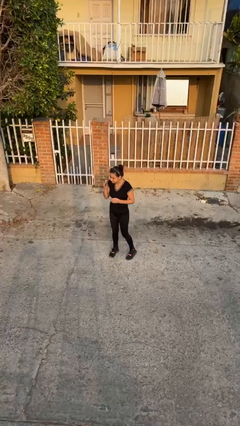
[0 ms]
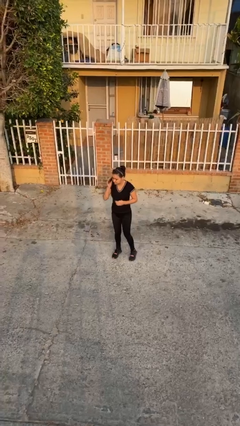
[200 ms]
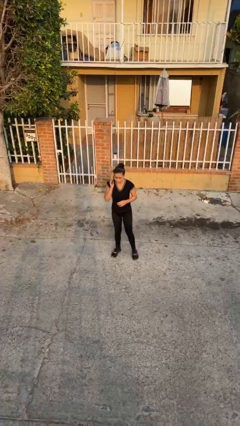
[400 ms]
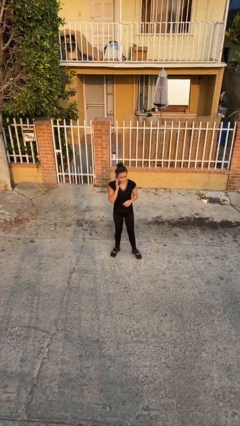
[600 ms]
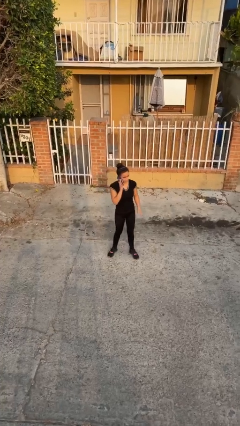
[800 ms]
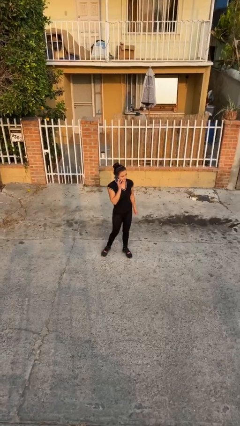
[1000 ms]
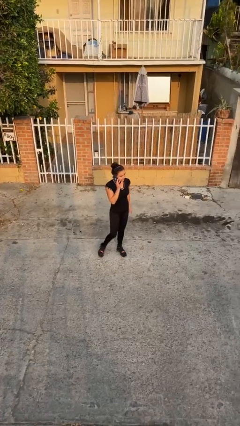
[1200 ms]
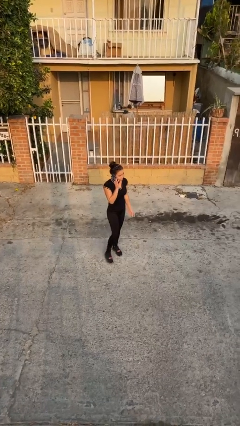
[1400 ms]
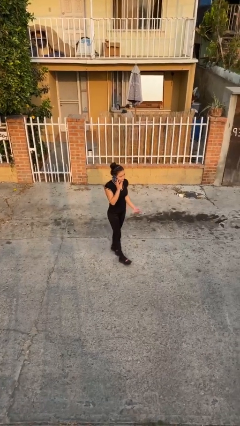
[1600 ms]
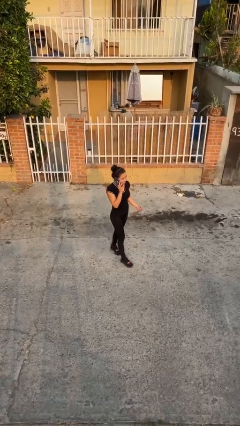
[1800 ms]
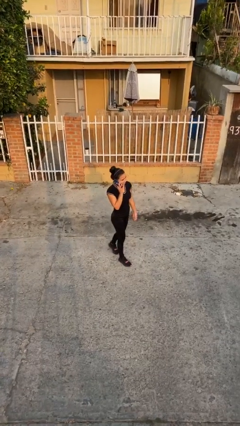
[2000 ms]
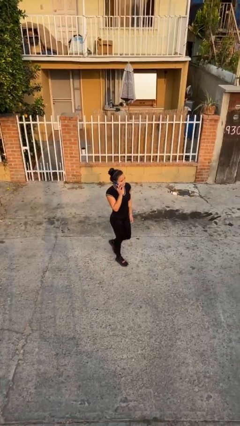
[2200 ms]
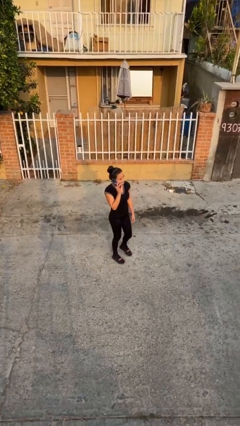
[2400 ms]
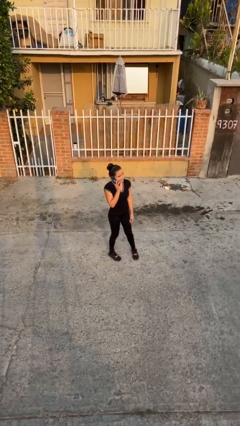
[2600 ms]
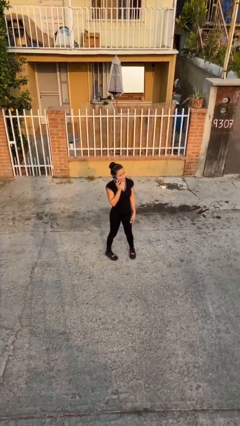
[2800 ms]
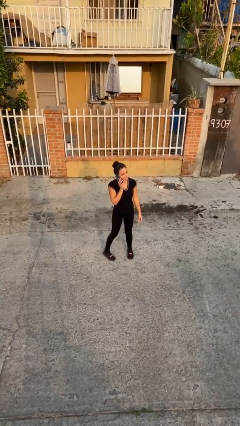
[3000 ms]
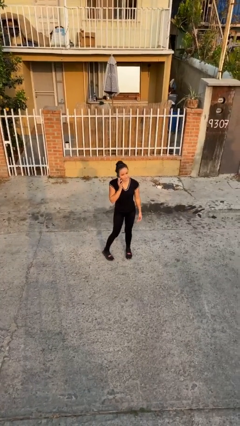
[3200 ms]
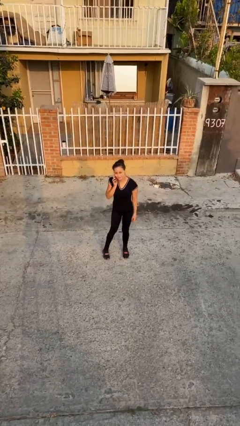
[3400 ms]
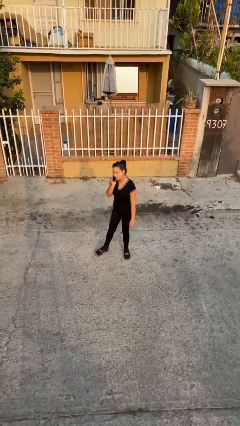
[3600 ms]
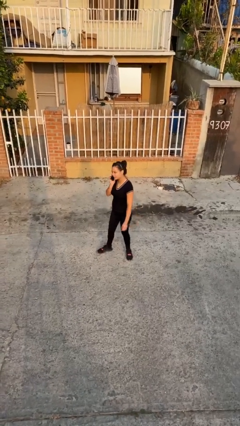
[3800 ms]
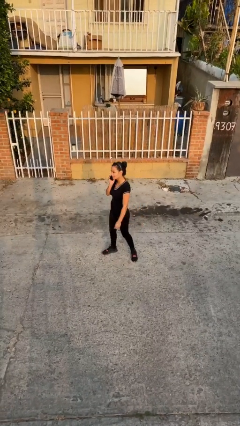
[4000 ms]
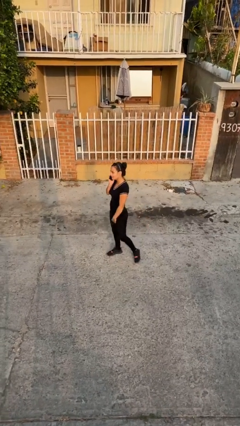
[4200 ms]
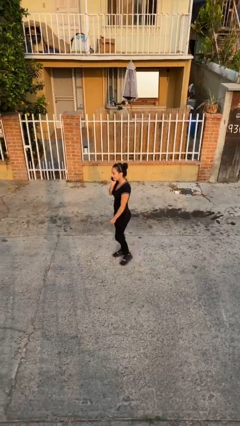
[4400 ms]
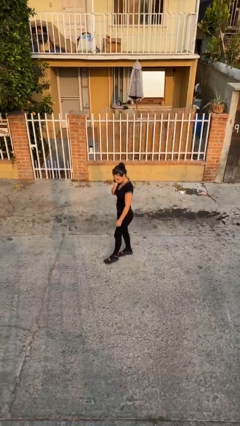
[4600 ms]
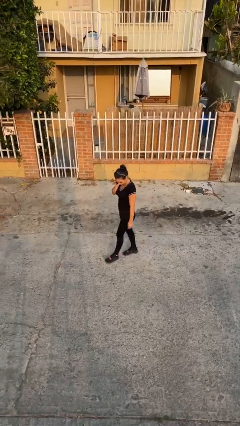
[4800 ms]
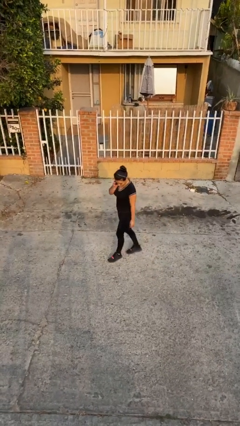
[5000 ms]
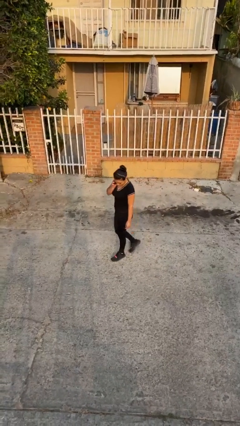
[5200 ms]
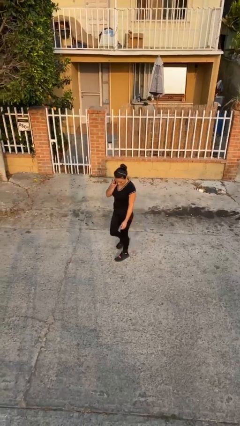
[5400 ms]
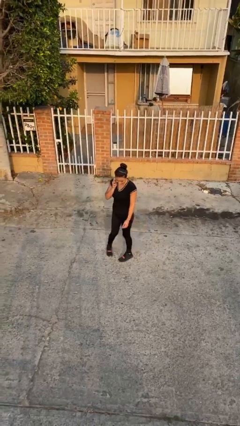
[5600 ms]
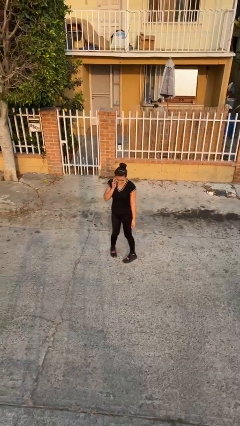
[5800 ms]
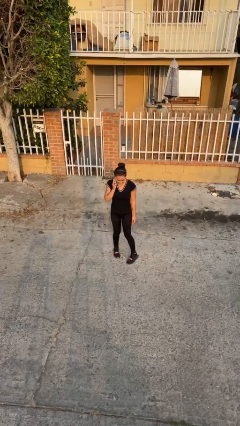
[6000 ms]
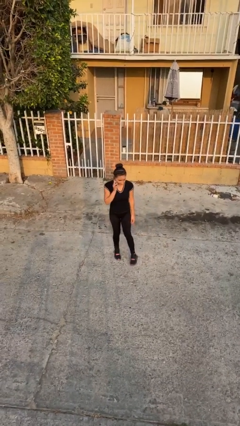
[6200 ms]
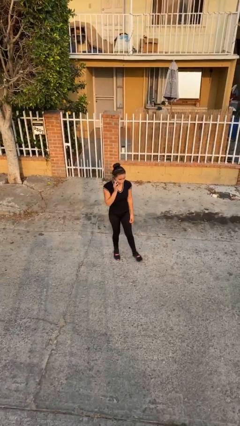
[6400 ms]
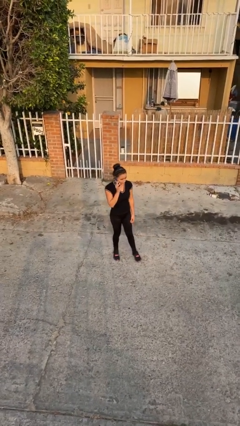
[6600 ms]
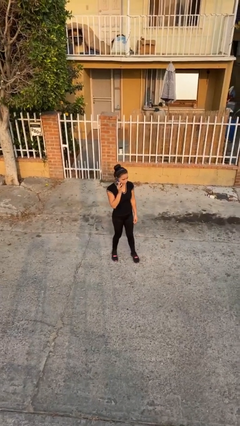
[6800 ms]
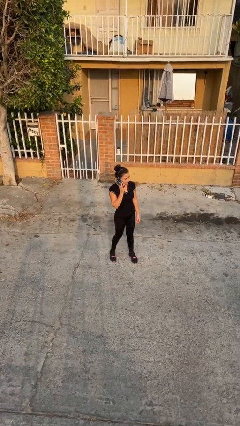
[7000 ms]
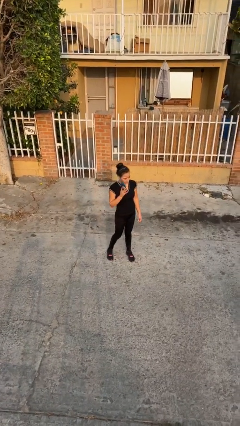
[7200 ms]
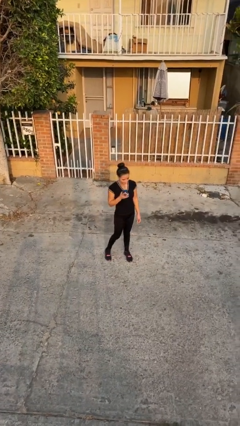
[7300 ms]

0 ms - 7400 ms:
person talks on phone

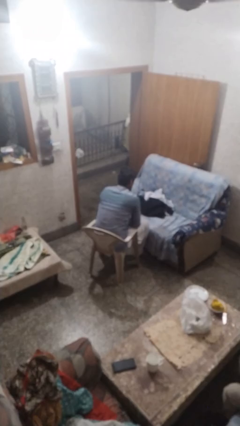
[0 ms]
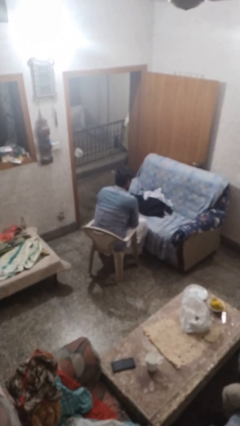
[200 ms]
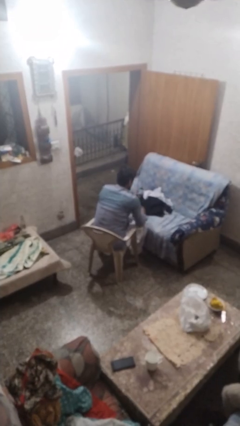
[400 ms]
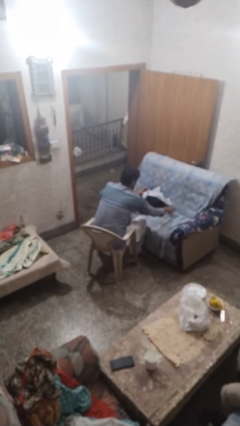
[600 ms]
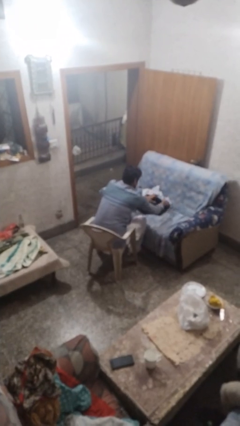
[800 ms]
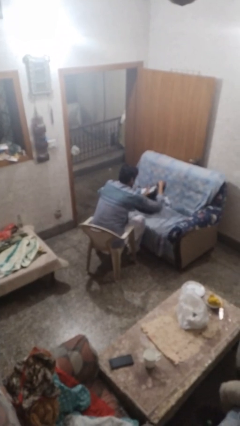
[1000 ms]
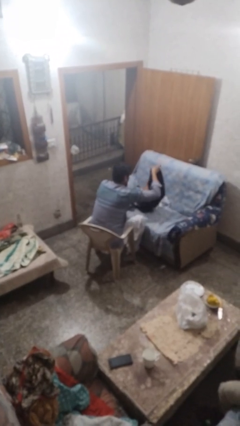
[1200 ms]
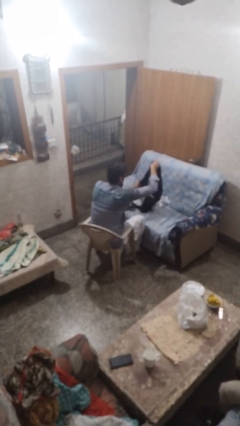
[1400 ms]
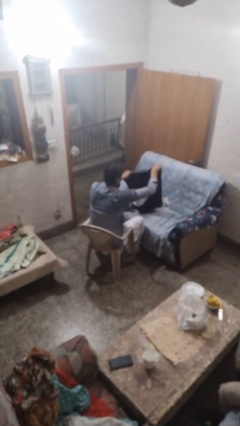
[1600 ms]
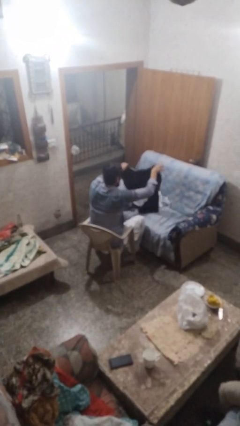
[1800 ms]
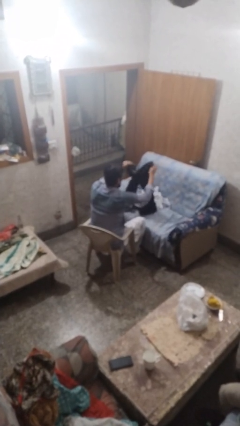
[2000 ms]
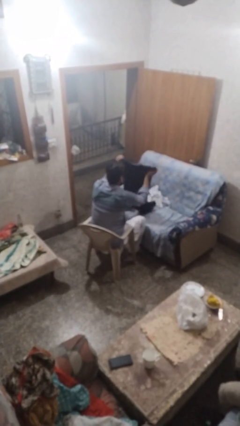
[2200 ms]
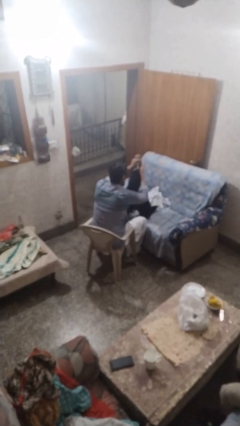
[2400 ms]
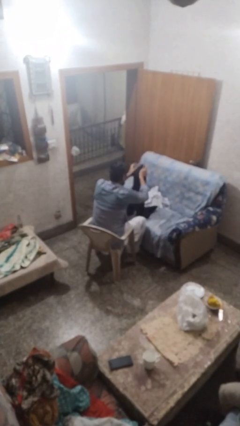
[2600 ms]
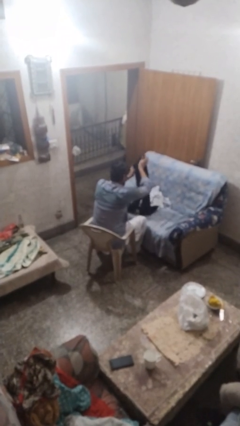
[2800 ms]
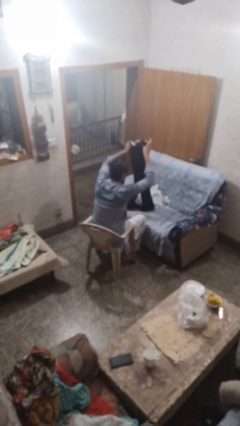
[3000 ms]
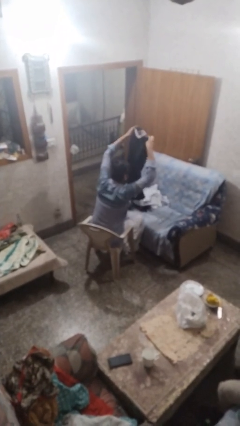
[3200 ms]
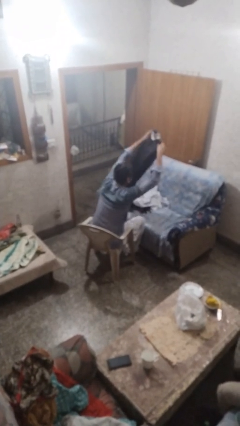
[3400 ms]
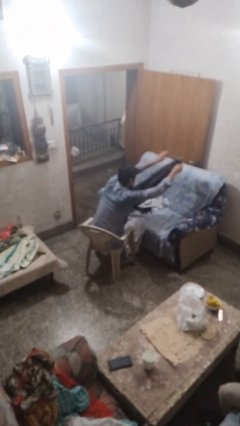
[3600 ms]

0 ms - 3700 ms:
person folds pants

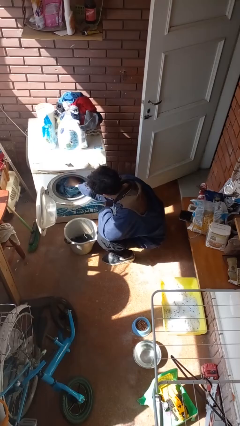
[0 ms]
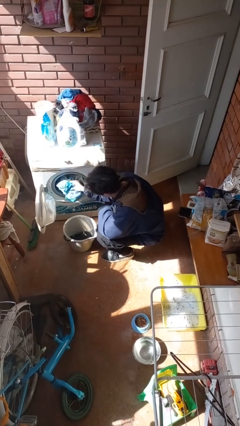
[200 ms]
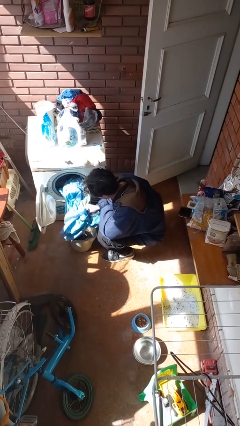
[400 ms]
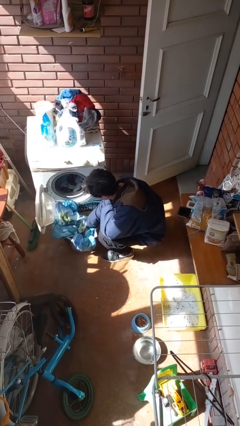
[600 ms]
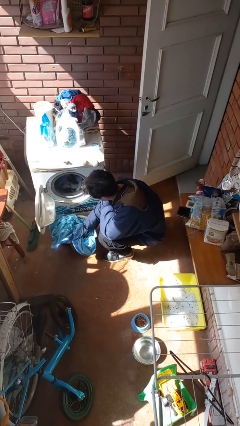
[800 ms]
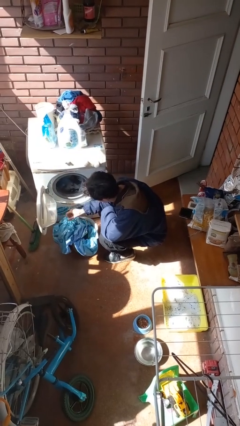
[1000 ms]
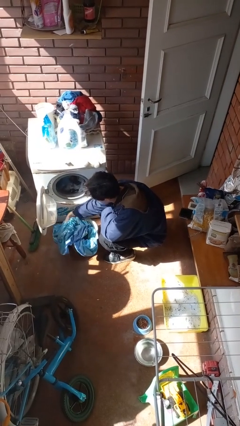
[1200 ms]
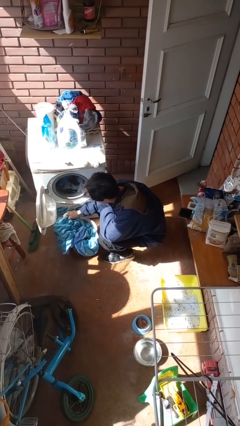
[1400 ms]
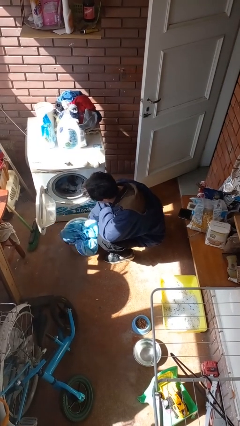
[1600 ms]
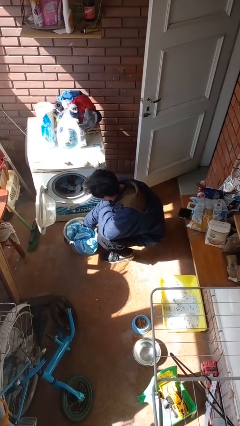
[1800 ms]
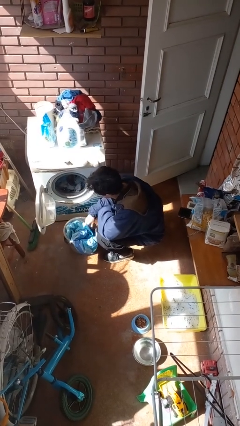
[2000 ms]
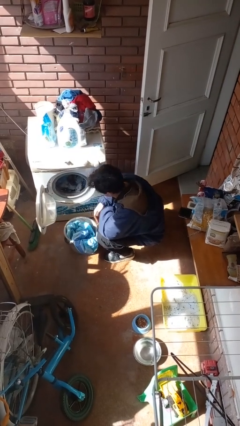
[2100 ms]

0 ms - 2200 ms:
person unloads clotheswasher

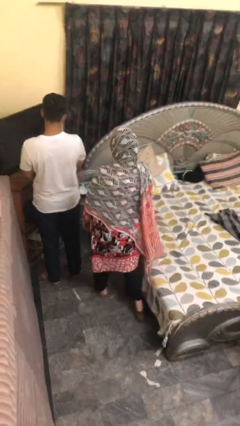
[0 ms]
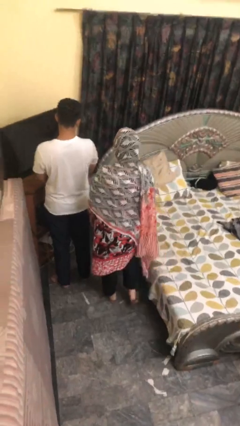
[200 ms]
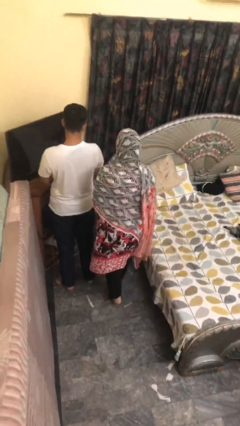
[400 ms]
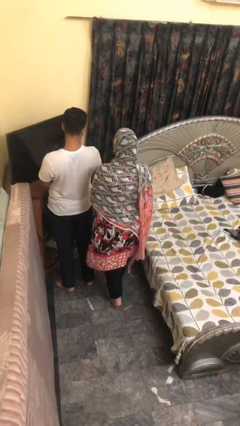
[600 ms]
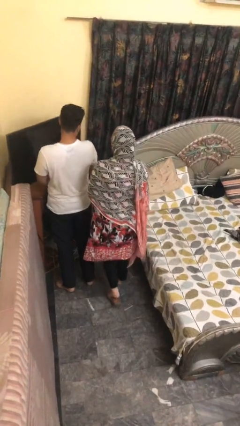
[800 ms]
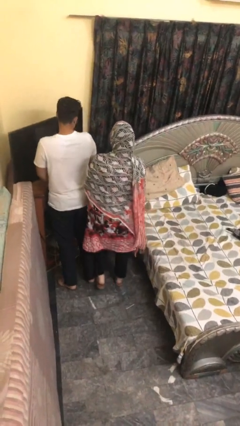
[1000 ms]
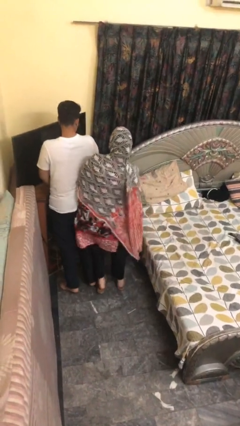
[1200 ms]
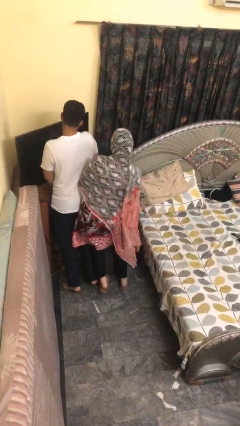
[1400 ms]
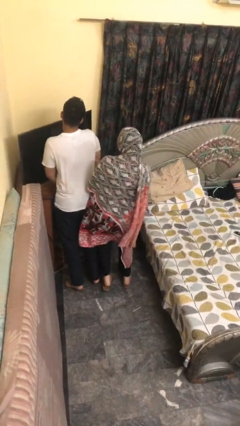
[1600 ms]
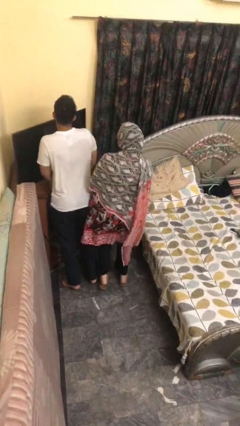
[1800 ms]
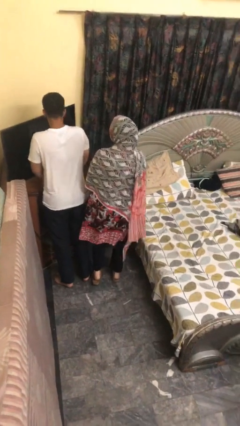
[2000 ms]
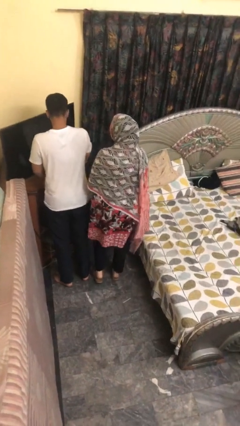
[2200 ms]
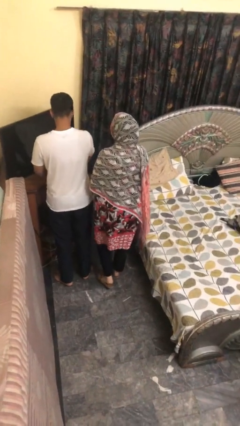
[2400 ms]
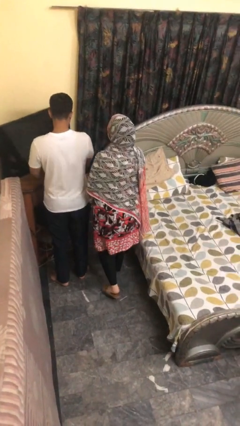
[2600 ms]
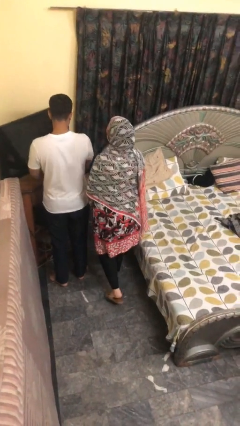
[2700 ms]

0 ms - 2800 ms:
person bumps into person

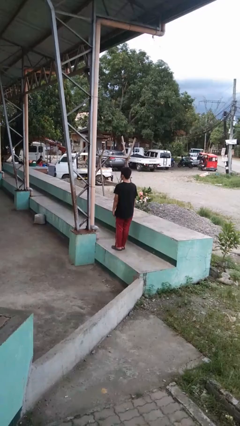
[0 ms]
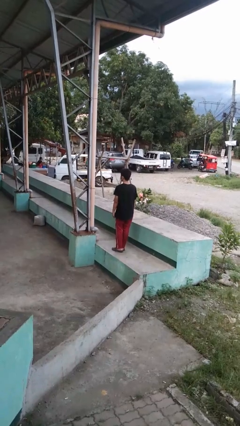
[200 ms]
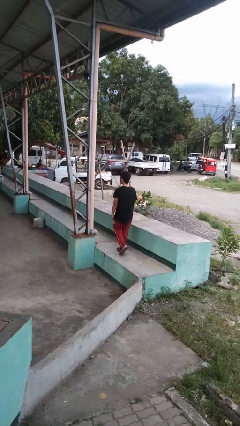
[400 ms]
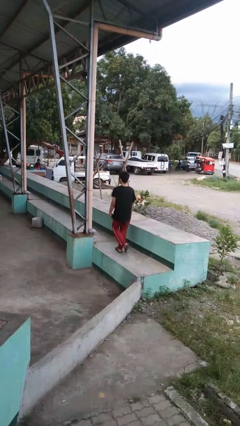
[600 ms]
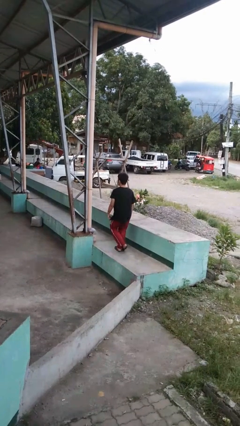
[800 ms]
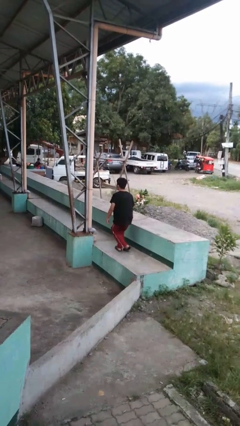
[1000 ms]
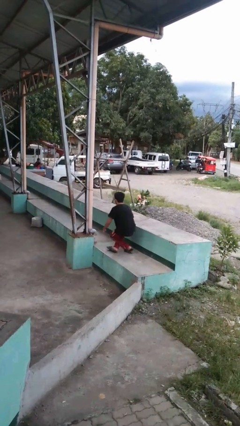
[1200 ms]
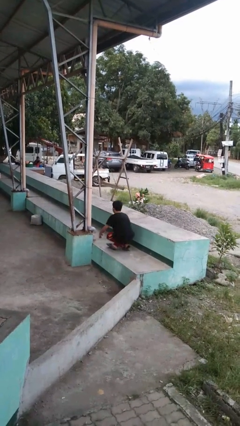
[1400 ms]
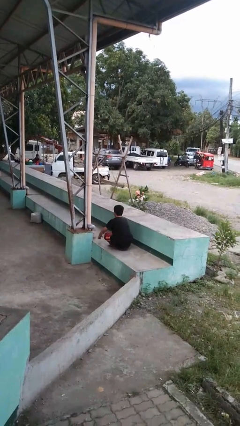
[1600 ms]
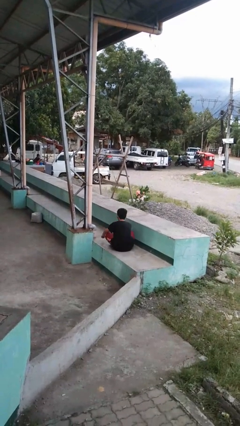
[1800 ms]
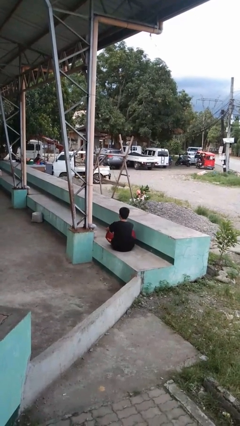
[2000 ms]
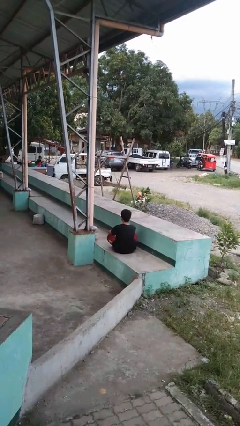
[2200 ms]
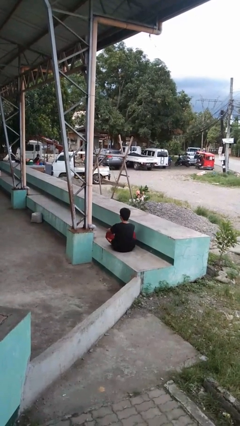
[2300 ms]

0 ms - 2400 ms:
person sits crisscross
